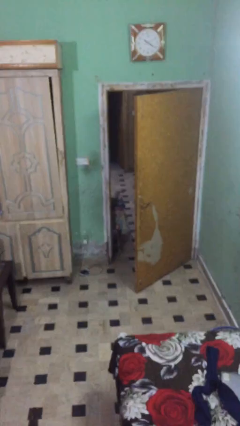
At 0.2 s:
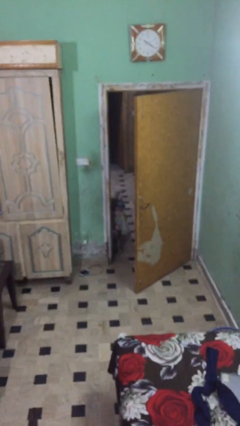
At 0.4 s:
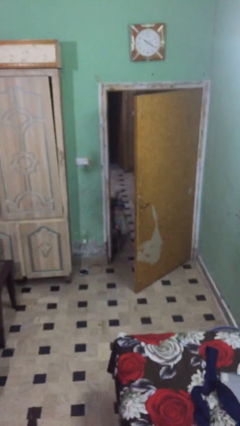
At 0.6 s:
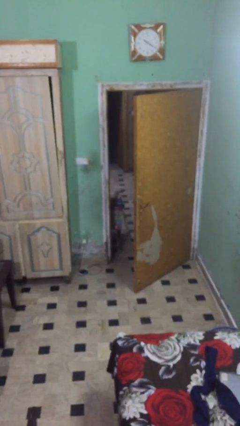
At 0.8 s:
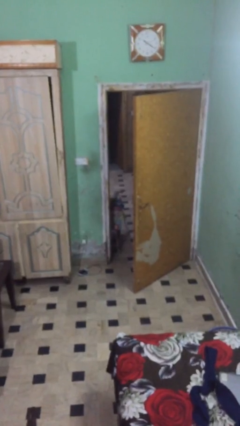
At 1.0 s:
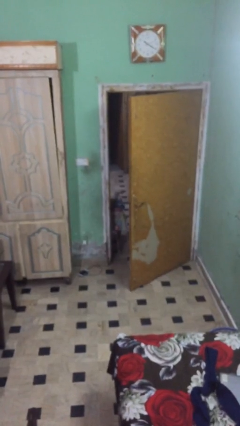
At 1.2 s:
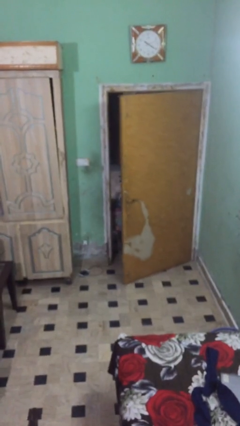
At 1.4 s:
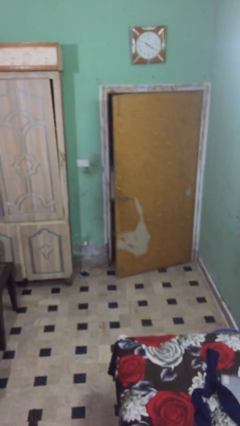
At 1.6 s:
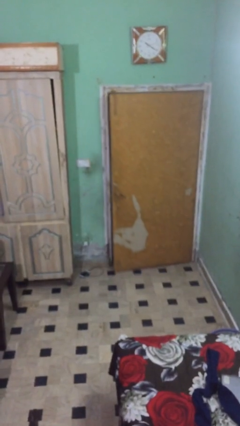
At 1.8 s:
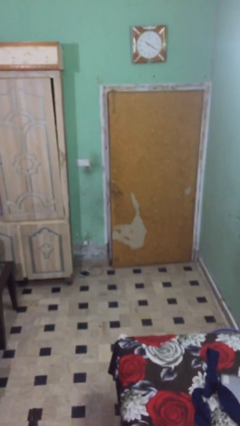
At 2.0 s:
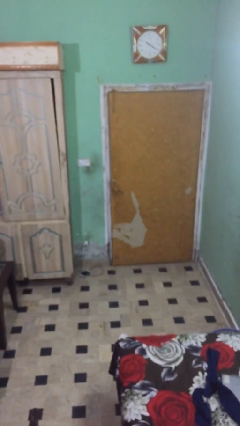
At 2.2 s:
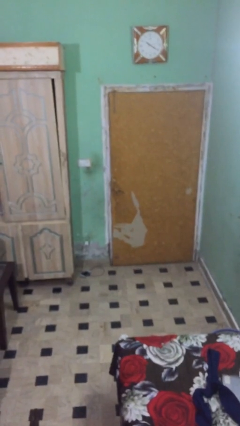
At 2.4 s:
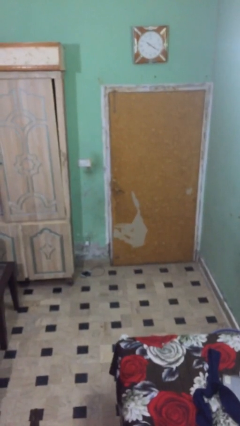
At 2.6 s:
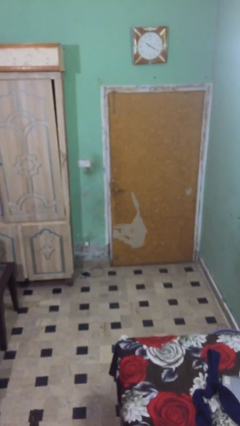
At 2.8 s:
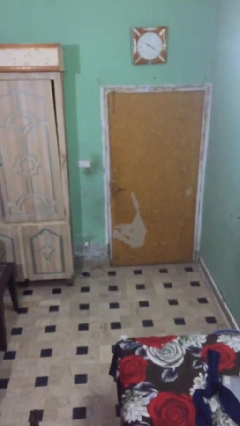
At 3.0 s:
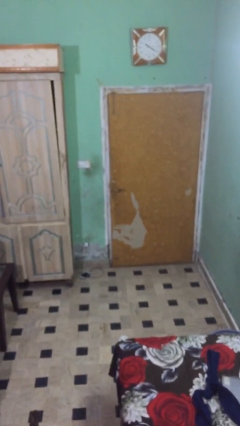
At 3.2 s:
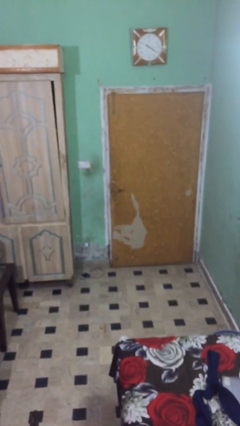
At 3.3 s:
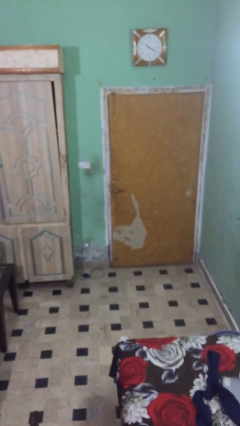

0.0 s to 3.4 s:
person closes facility door

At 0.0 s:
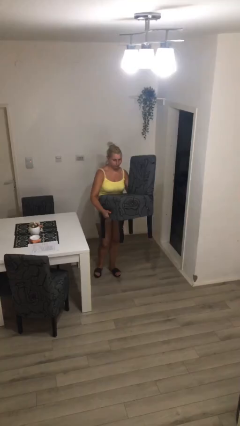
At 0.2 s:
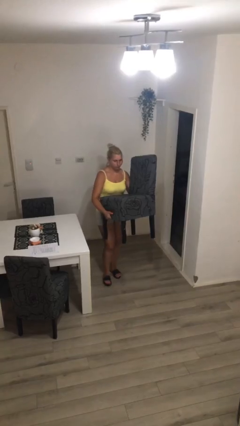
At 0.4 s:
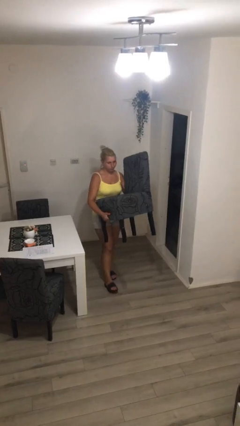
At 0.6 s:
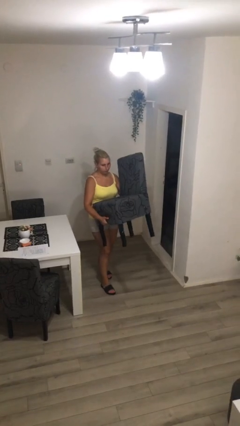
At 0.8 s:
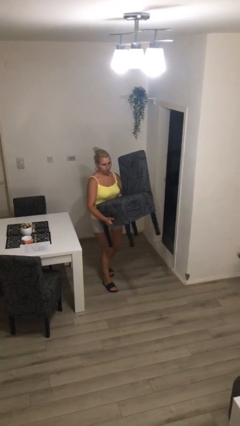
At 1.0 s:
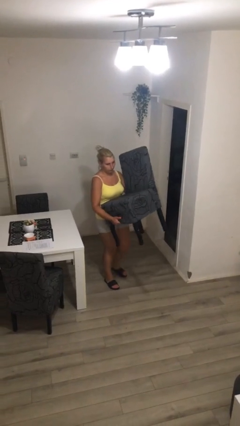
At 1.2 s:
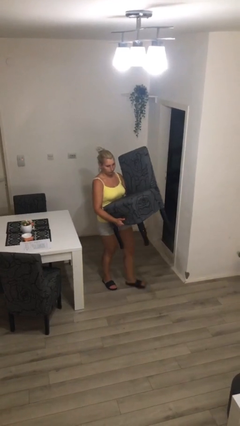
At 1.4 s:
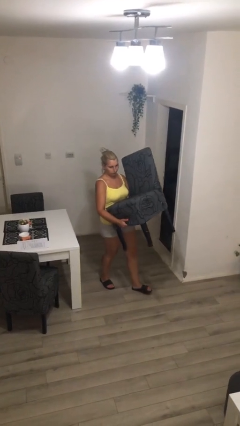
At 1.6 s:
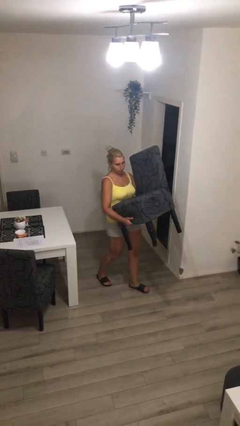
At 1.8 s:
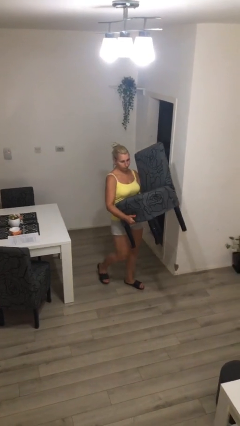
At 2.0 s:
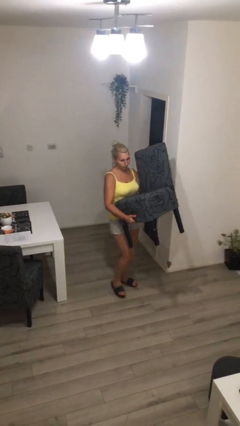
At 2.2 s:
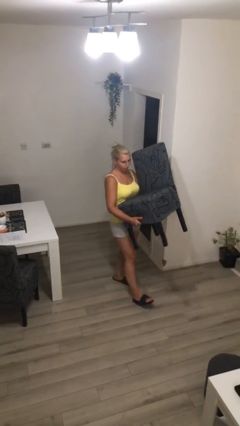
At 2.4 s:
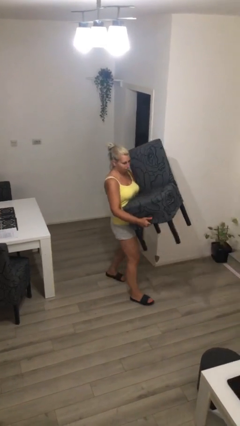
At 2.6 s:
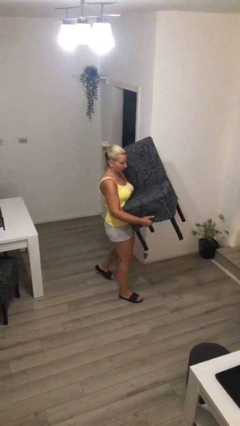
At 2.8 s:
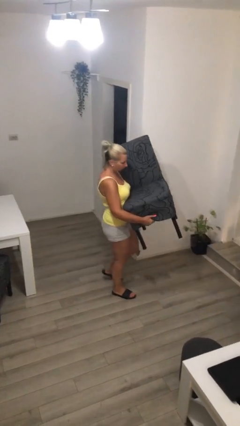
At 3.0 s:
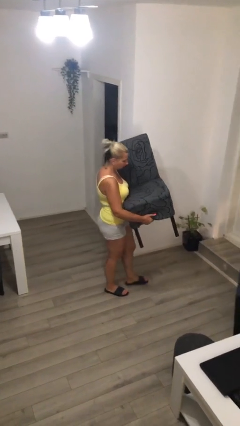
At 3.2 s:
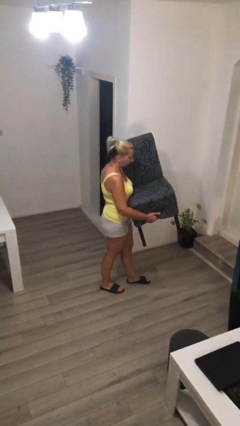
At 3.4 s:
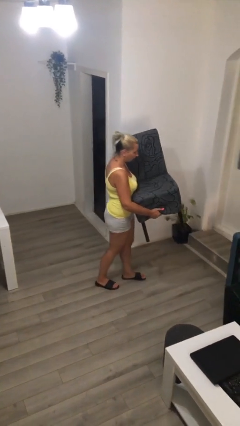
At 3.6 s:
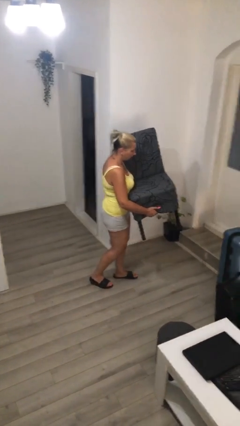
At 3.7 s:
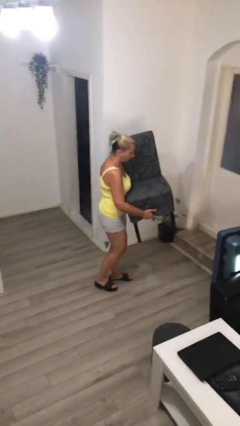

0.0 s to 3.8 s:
person carries heavy object

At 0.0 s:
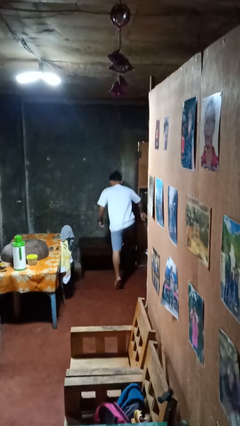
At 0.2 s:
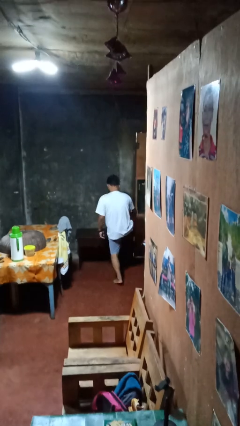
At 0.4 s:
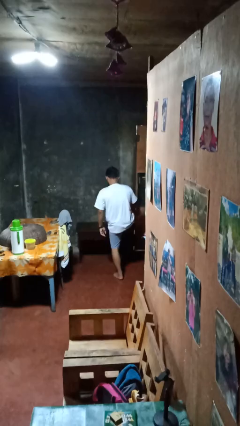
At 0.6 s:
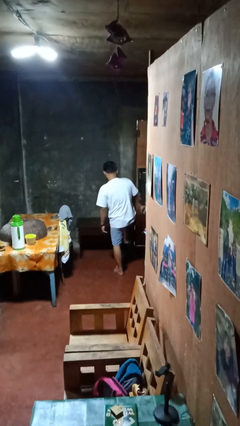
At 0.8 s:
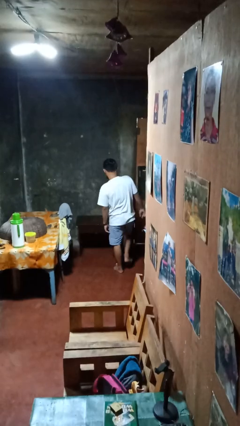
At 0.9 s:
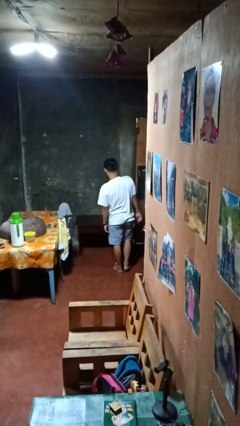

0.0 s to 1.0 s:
person climbs off table

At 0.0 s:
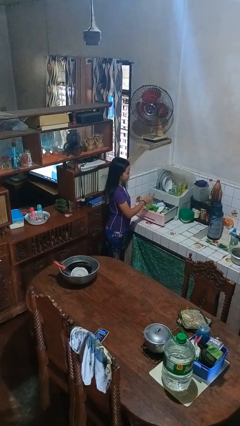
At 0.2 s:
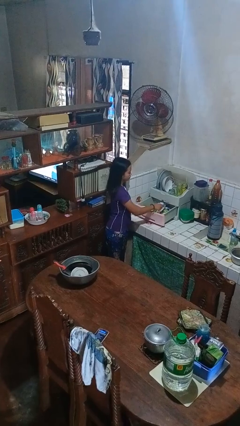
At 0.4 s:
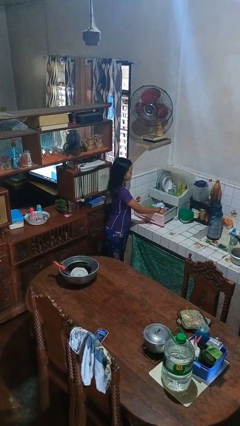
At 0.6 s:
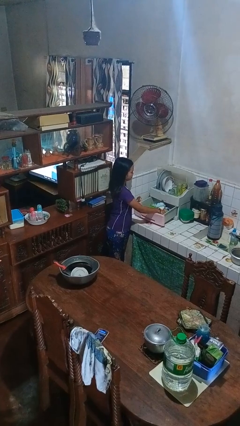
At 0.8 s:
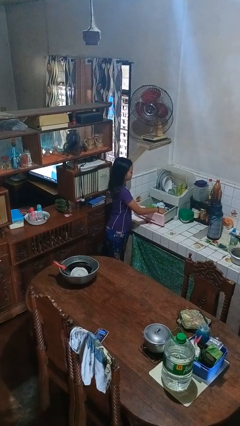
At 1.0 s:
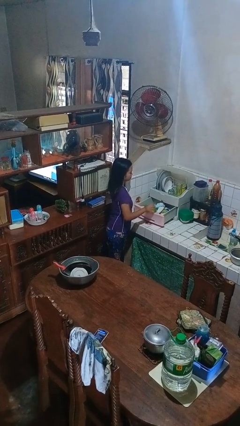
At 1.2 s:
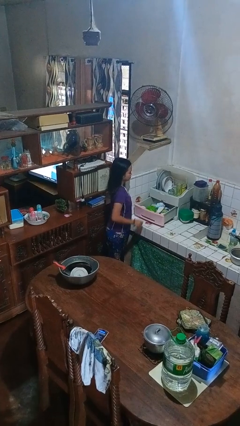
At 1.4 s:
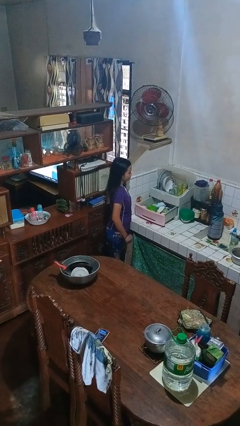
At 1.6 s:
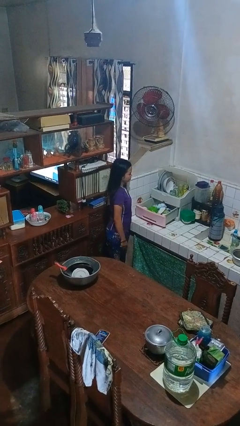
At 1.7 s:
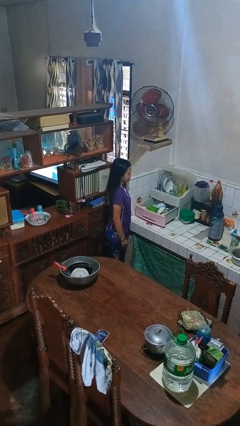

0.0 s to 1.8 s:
person puts object into kitchen drawer

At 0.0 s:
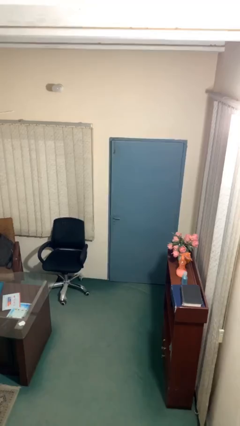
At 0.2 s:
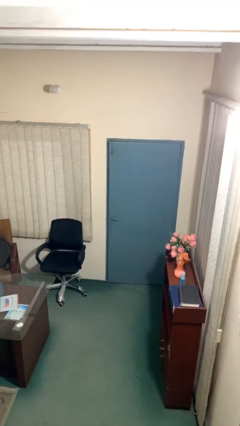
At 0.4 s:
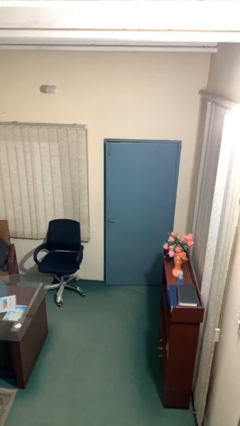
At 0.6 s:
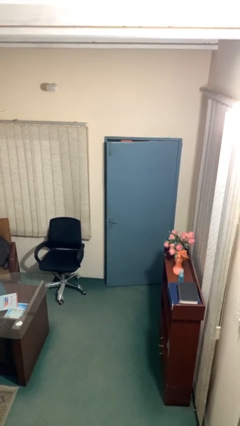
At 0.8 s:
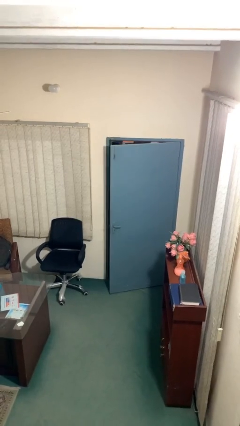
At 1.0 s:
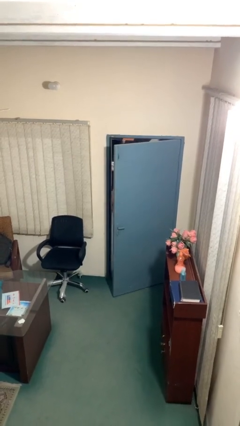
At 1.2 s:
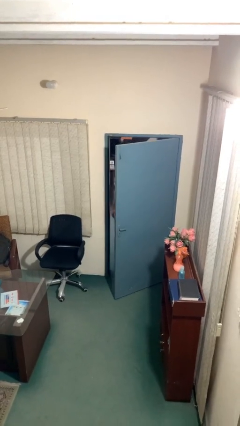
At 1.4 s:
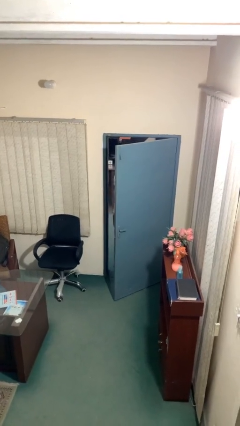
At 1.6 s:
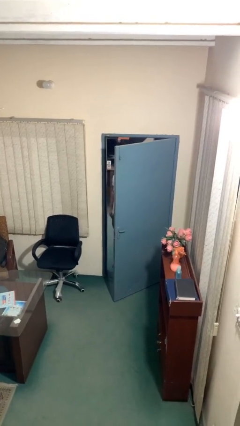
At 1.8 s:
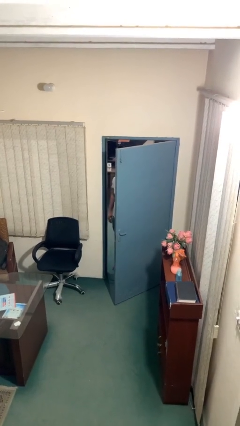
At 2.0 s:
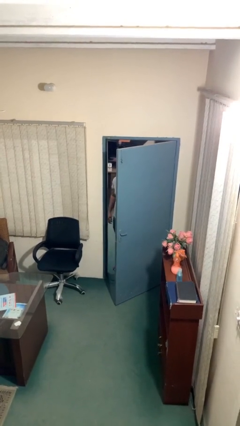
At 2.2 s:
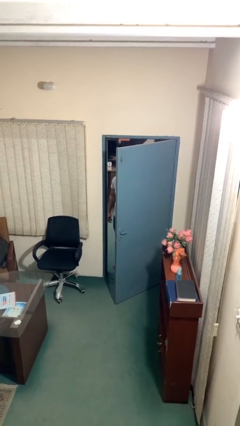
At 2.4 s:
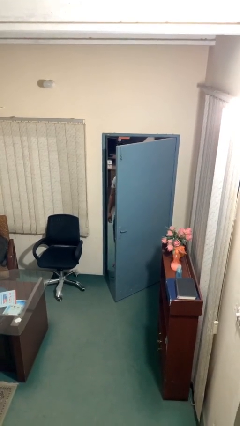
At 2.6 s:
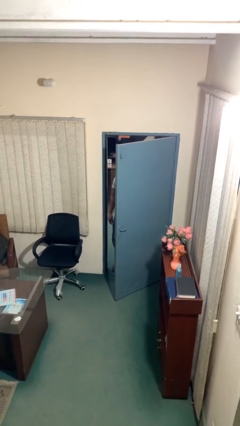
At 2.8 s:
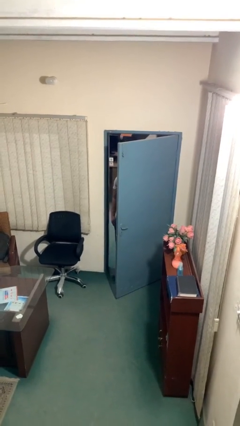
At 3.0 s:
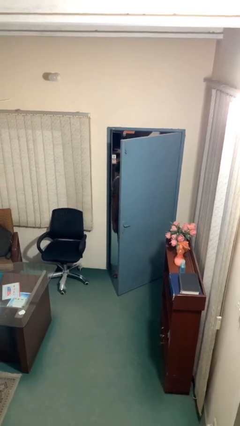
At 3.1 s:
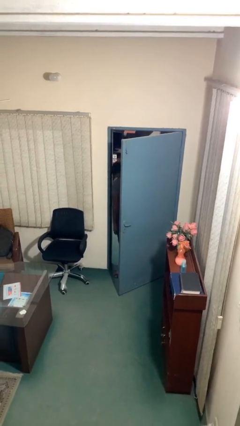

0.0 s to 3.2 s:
person opens facility door

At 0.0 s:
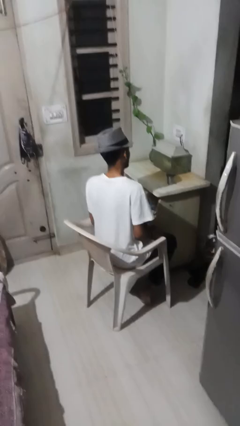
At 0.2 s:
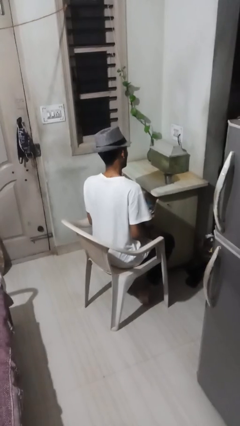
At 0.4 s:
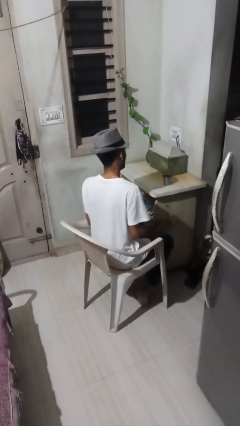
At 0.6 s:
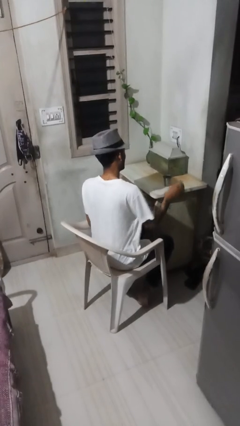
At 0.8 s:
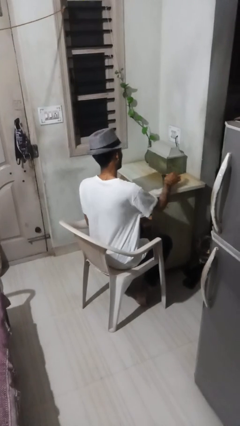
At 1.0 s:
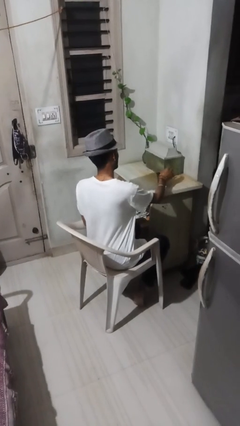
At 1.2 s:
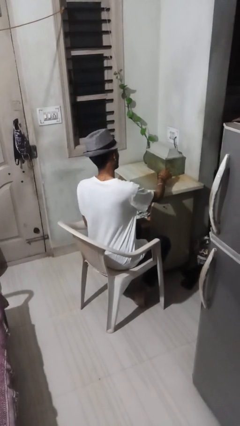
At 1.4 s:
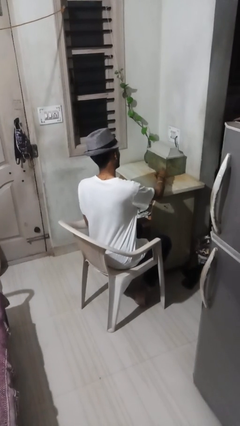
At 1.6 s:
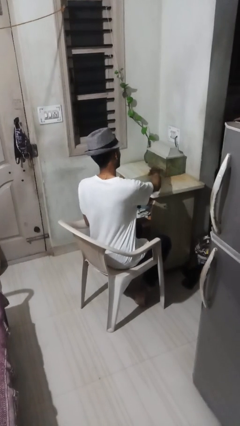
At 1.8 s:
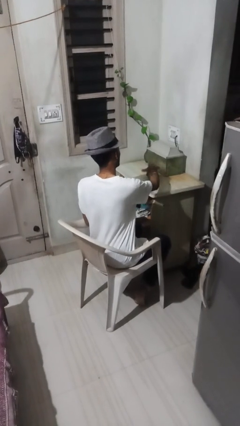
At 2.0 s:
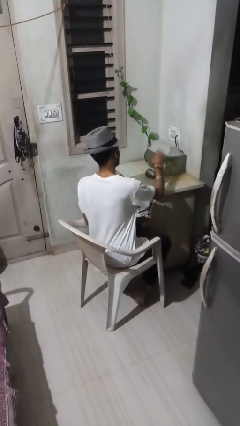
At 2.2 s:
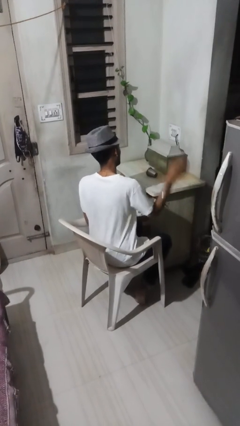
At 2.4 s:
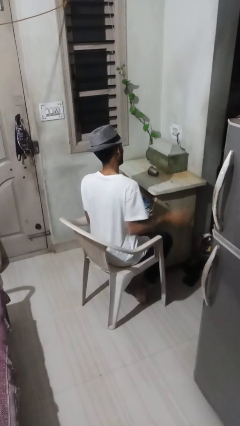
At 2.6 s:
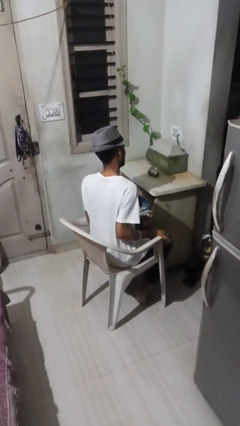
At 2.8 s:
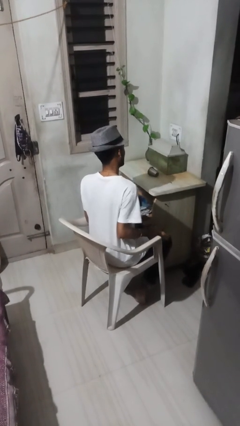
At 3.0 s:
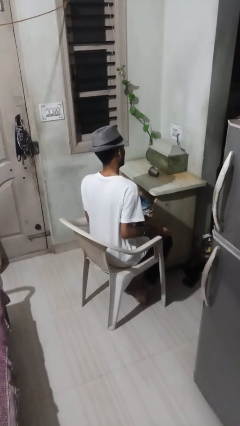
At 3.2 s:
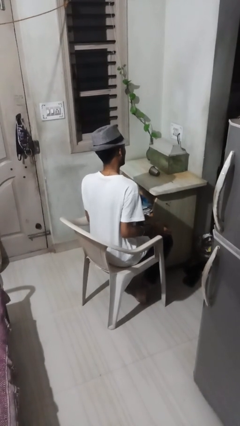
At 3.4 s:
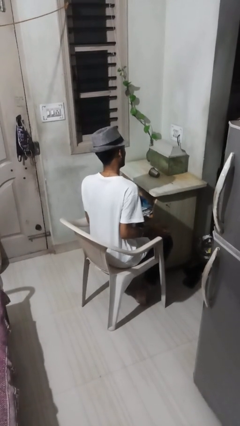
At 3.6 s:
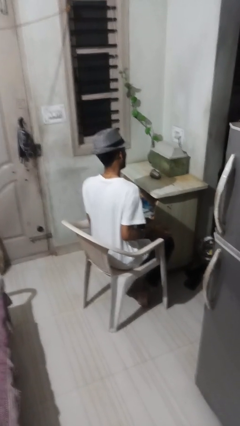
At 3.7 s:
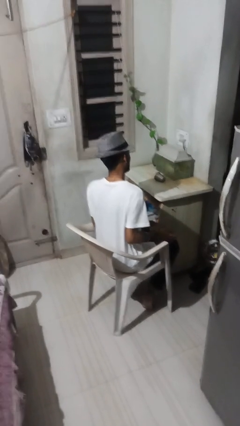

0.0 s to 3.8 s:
person knocks over glass

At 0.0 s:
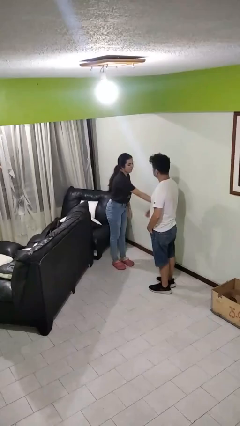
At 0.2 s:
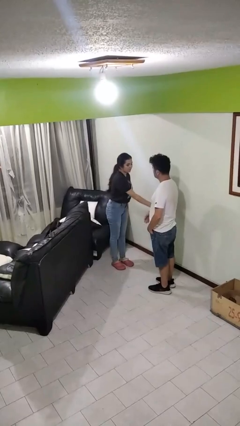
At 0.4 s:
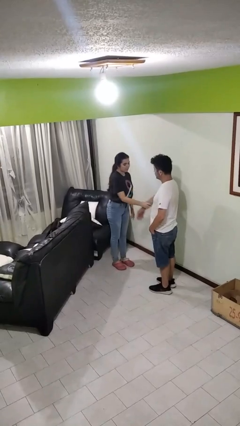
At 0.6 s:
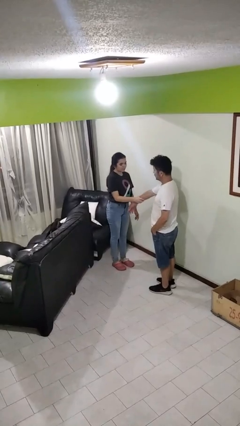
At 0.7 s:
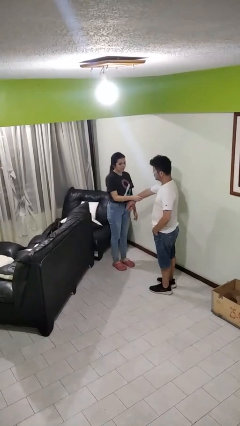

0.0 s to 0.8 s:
person grabs person by forearm
